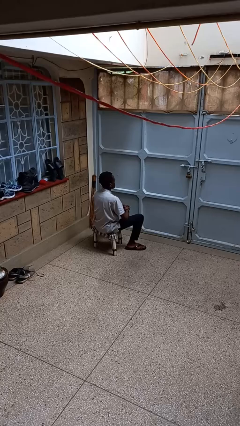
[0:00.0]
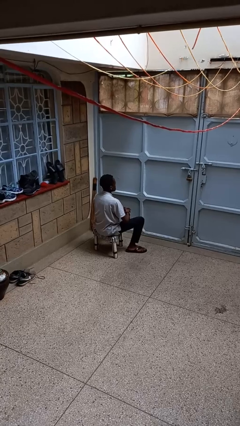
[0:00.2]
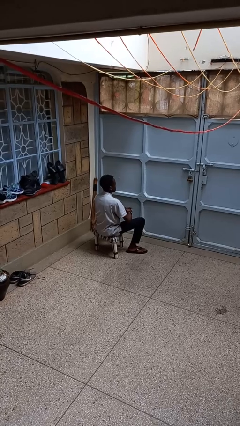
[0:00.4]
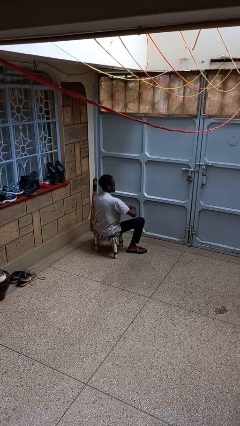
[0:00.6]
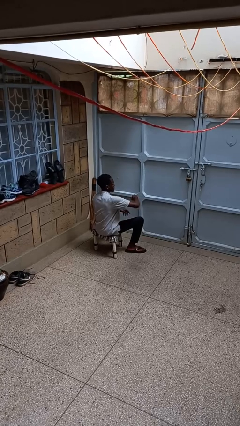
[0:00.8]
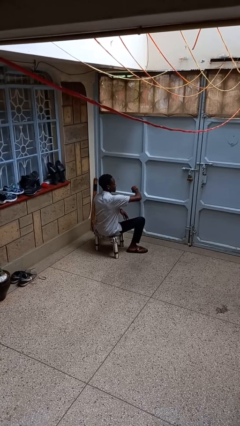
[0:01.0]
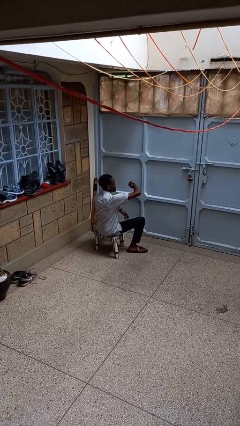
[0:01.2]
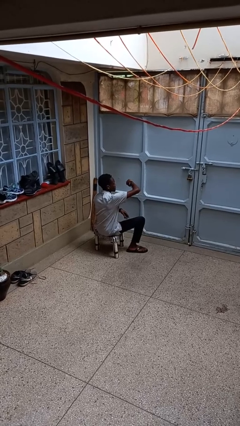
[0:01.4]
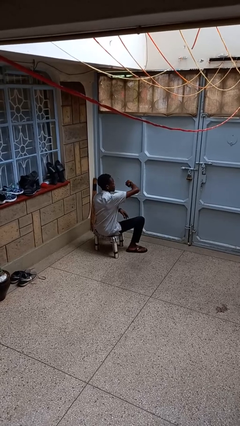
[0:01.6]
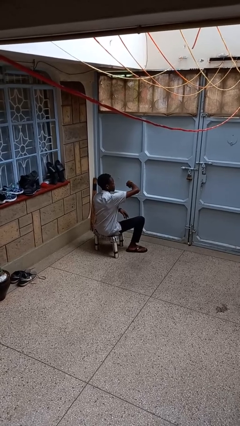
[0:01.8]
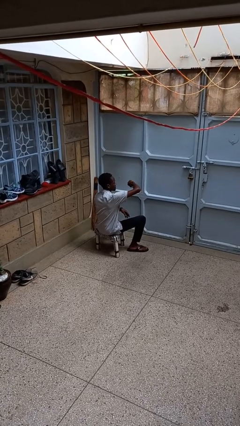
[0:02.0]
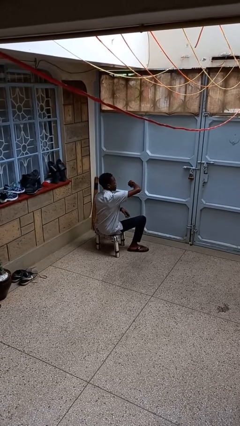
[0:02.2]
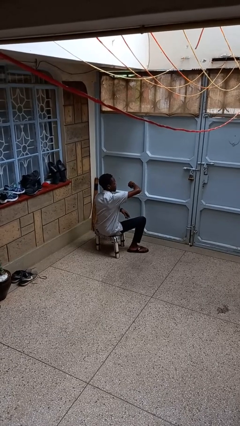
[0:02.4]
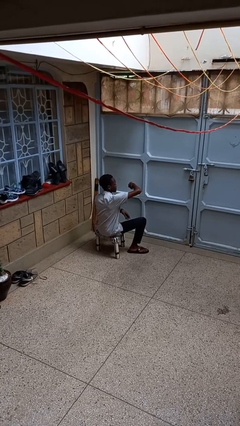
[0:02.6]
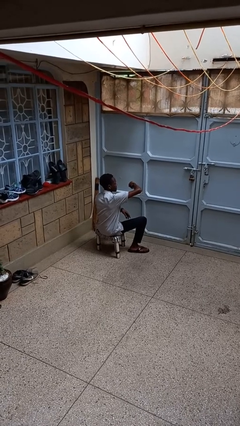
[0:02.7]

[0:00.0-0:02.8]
person looks at wristwatch

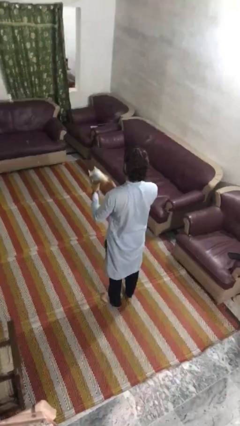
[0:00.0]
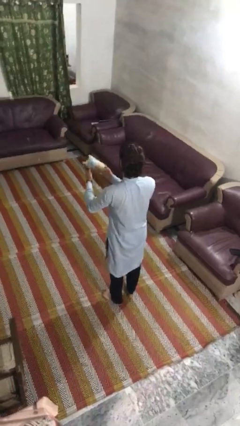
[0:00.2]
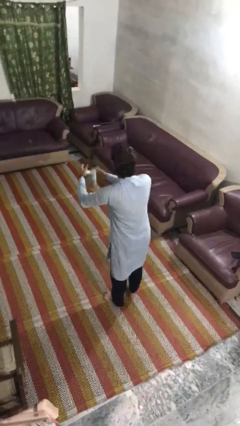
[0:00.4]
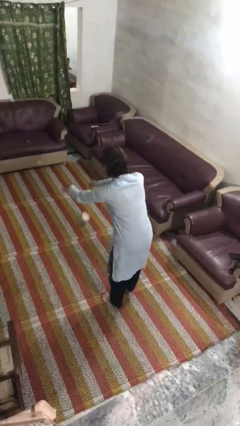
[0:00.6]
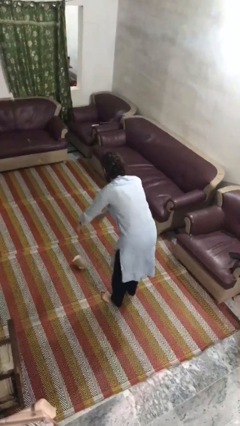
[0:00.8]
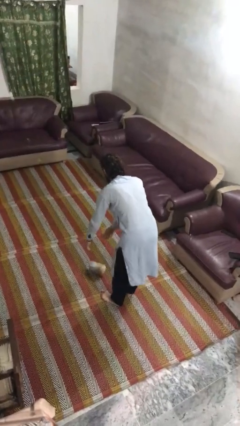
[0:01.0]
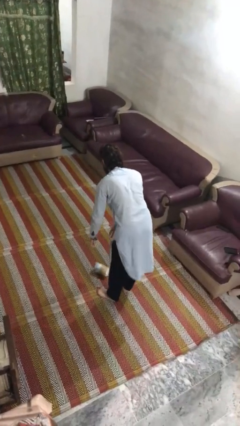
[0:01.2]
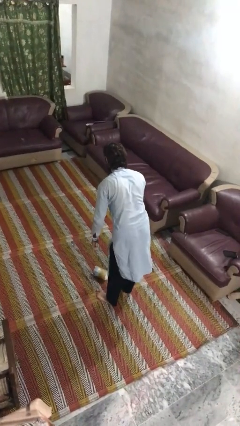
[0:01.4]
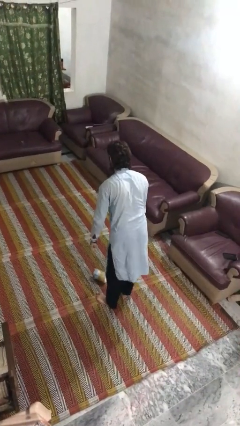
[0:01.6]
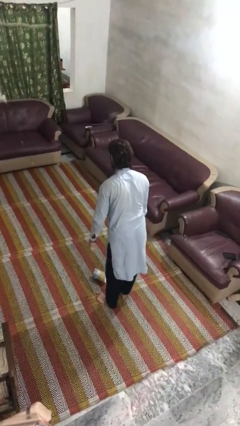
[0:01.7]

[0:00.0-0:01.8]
person drops object

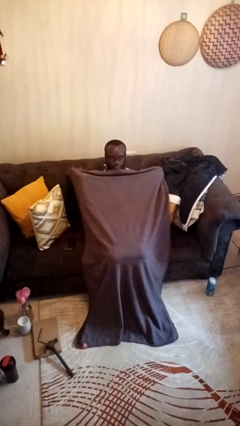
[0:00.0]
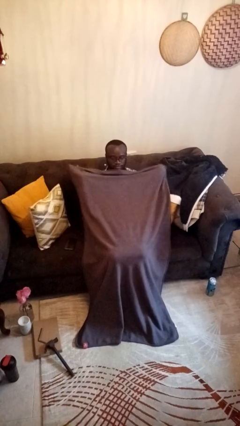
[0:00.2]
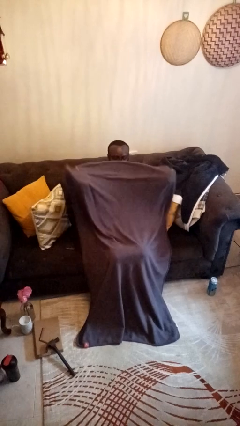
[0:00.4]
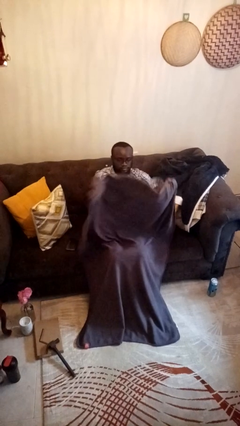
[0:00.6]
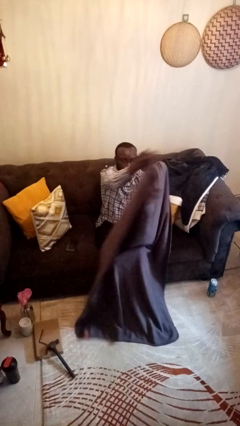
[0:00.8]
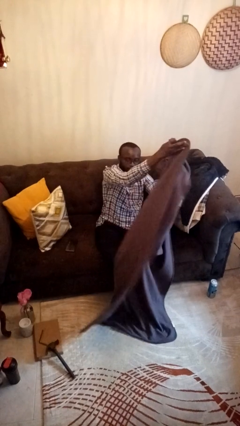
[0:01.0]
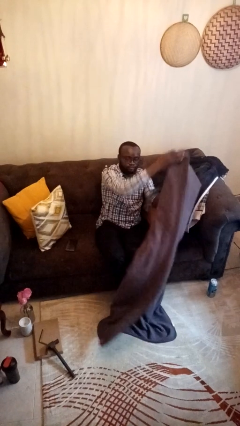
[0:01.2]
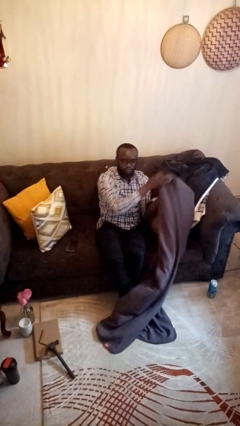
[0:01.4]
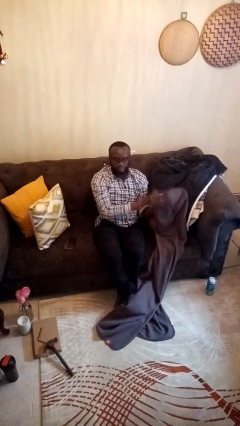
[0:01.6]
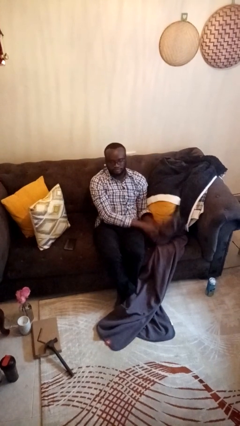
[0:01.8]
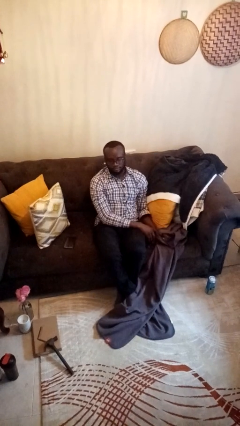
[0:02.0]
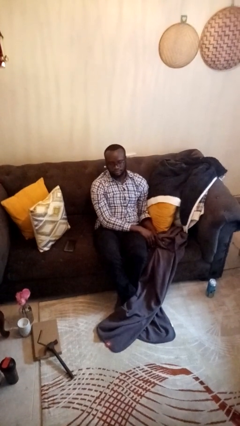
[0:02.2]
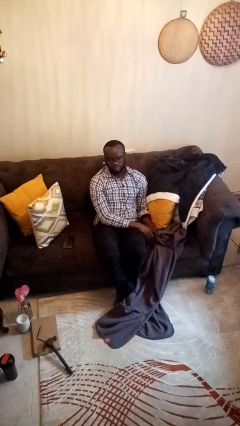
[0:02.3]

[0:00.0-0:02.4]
person uncovers with blanket

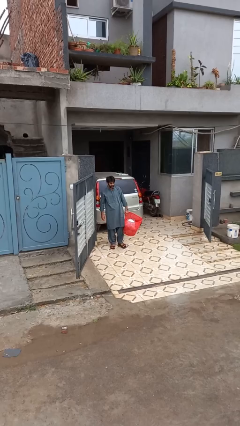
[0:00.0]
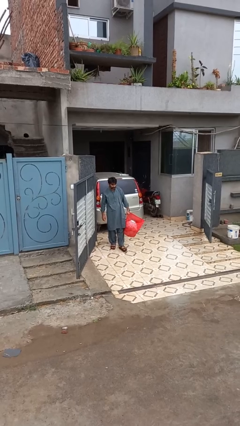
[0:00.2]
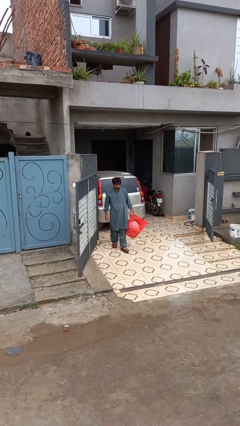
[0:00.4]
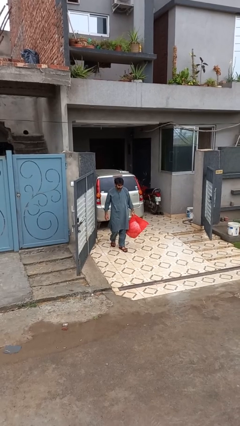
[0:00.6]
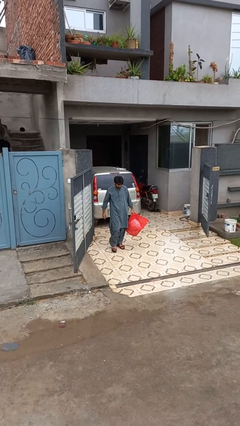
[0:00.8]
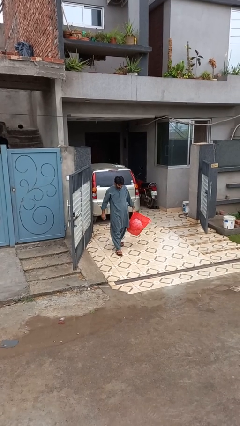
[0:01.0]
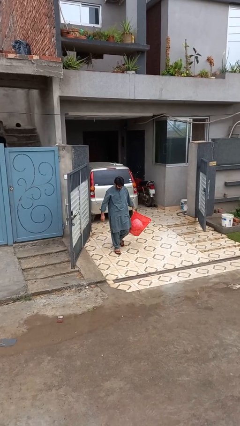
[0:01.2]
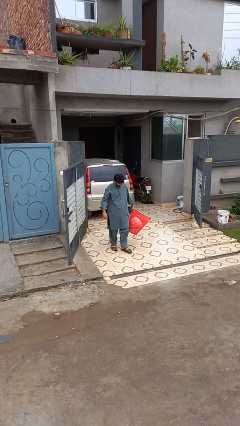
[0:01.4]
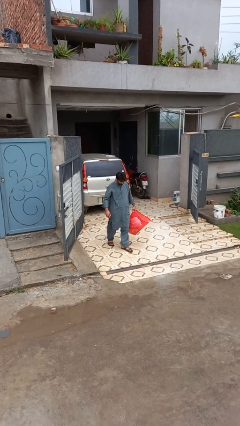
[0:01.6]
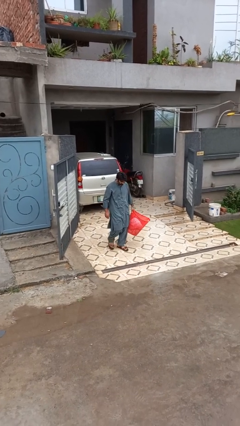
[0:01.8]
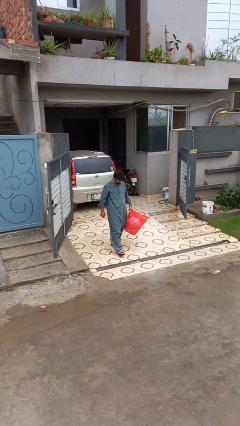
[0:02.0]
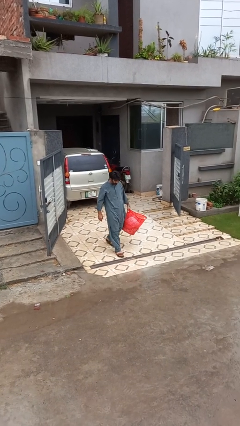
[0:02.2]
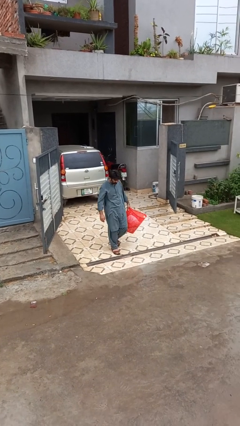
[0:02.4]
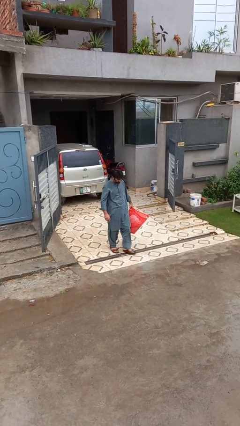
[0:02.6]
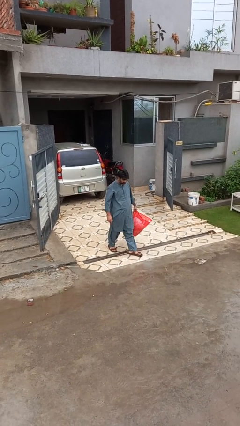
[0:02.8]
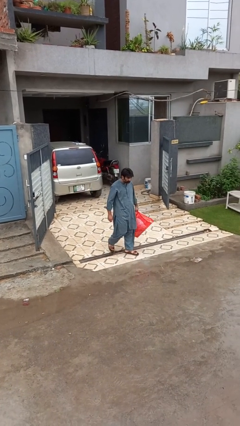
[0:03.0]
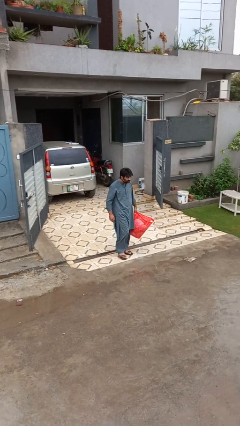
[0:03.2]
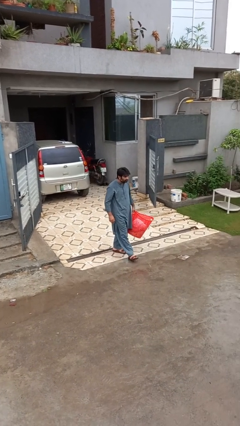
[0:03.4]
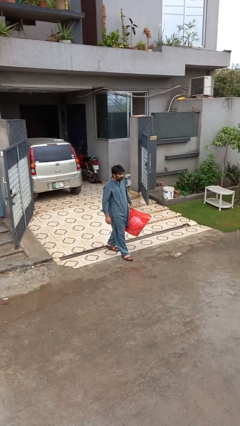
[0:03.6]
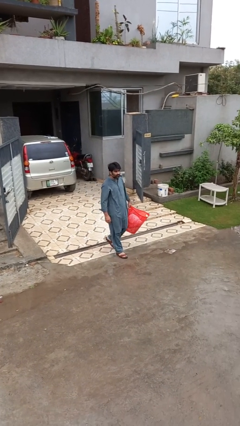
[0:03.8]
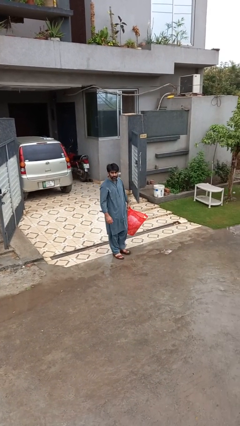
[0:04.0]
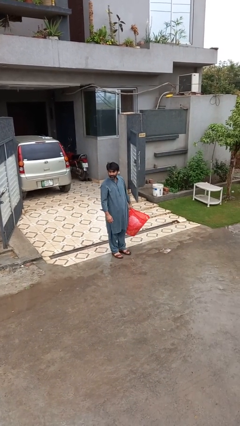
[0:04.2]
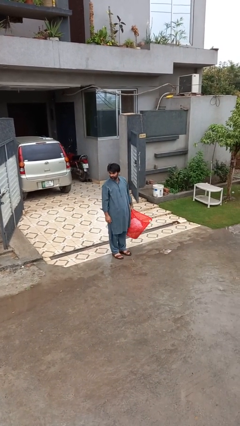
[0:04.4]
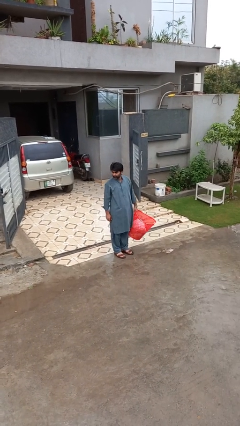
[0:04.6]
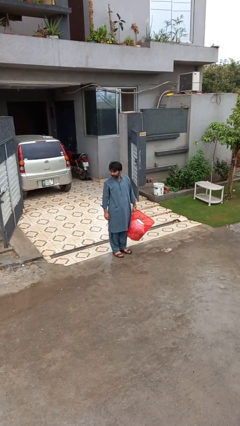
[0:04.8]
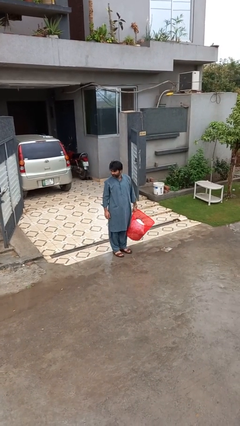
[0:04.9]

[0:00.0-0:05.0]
person carries laundry basket

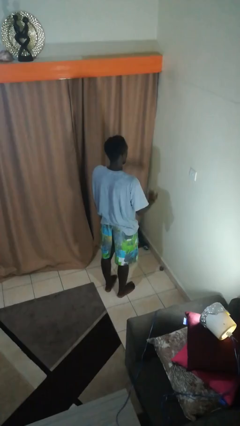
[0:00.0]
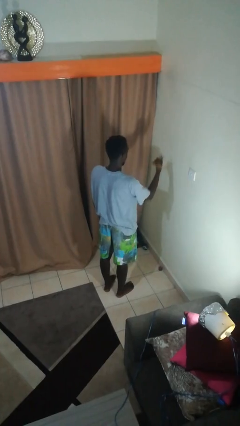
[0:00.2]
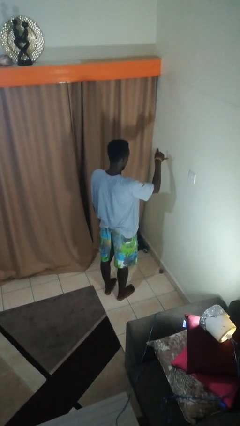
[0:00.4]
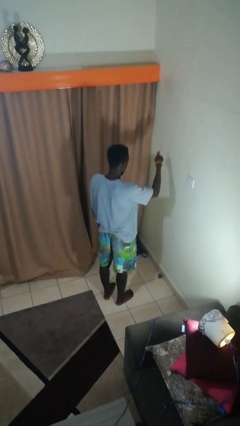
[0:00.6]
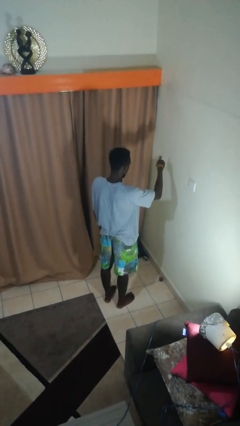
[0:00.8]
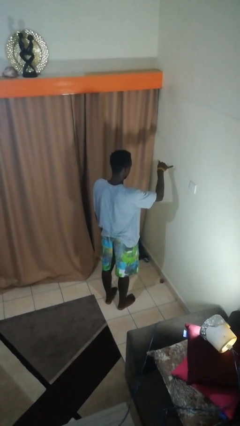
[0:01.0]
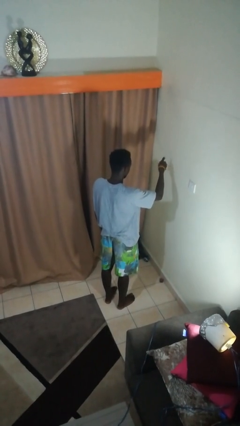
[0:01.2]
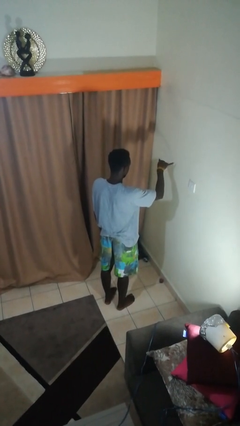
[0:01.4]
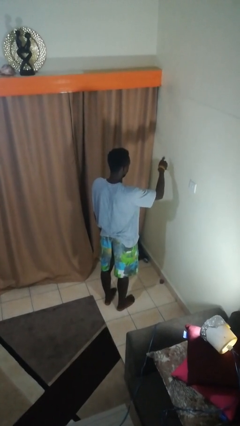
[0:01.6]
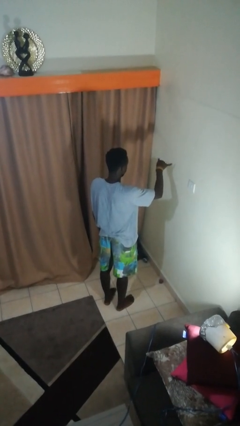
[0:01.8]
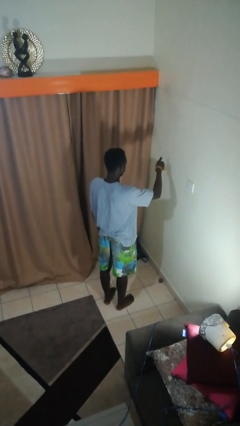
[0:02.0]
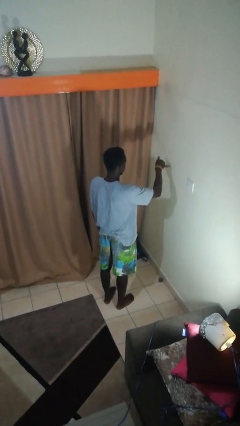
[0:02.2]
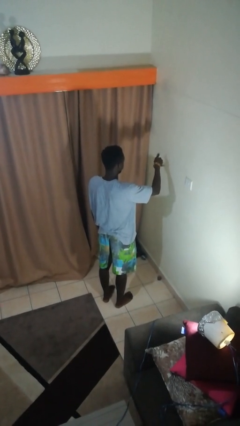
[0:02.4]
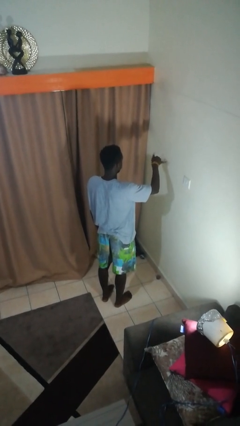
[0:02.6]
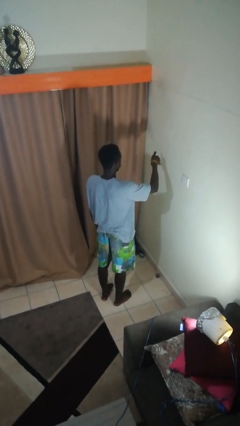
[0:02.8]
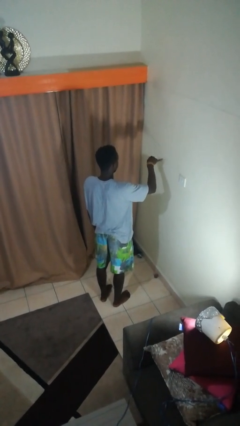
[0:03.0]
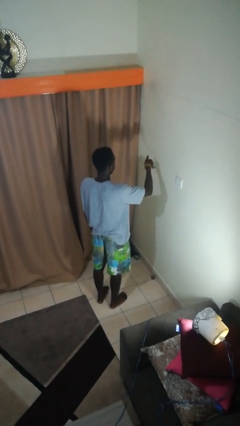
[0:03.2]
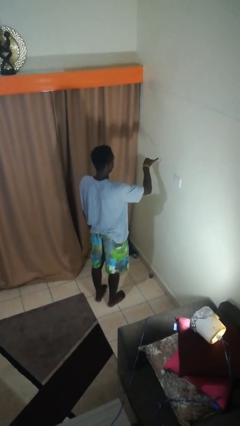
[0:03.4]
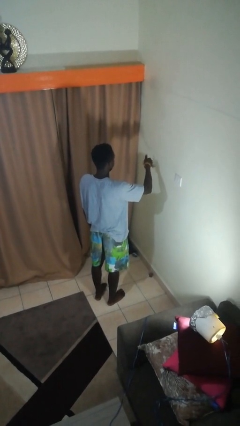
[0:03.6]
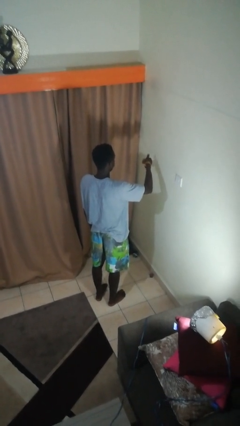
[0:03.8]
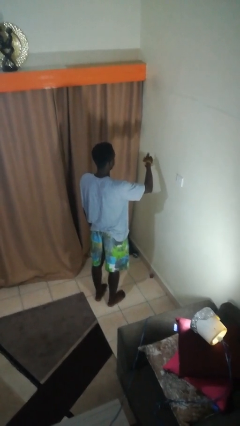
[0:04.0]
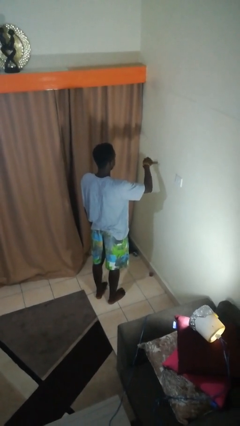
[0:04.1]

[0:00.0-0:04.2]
person gestures hang loose

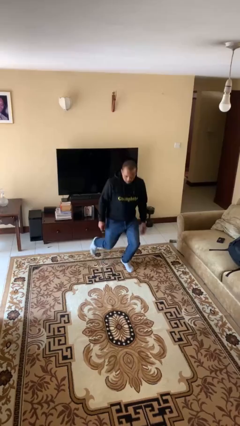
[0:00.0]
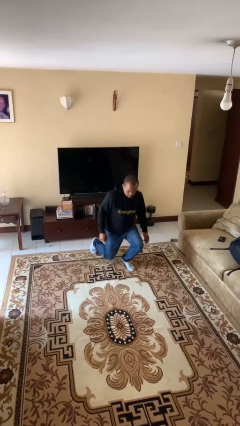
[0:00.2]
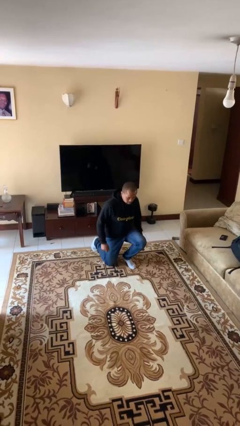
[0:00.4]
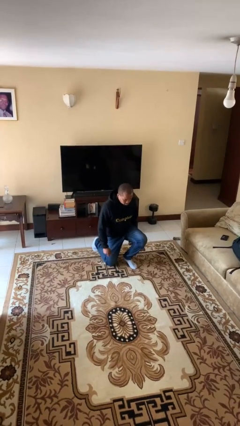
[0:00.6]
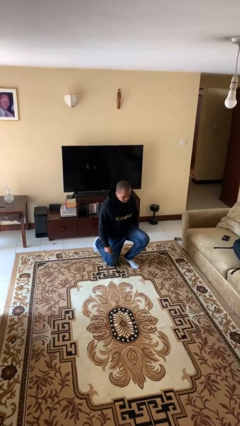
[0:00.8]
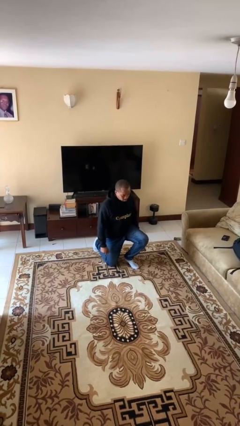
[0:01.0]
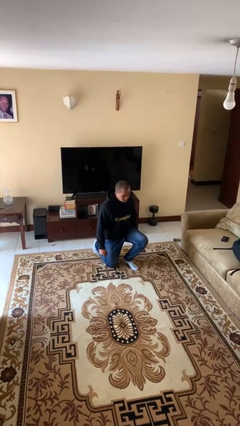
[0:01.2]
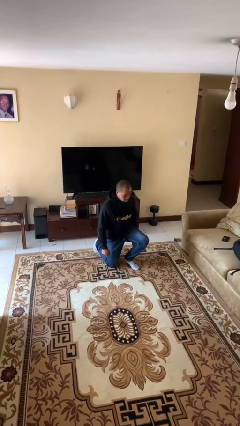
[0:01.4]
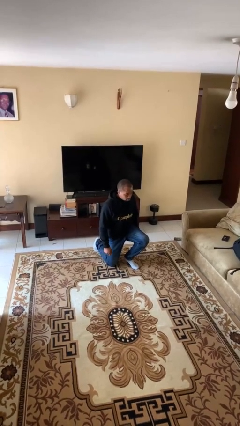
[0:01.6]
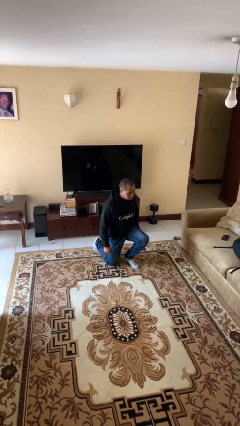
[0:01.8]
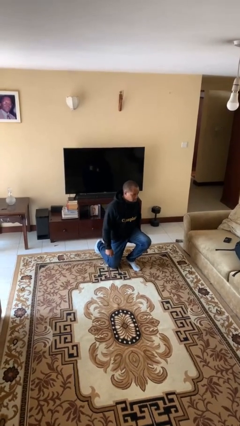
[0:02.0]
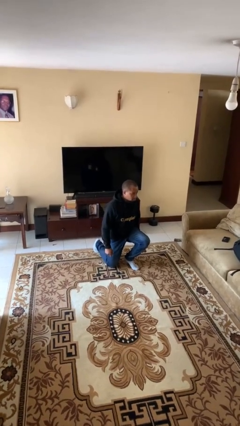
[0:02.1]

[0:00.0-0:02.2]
person kneels
